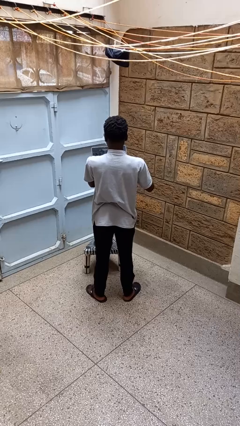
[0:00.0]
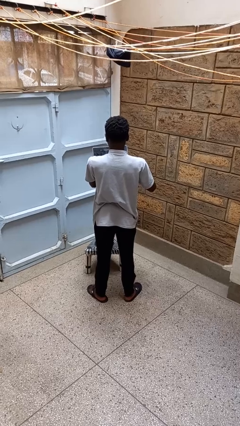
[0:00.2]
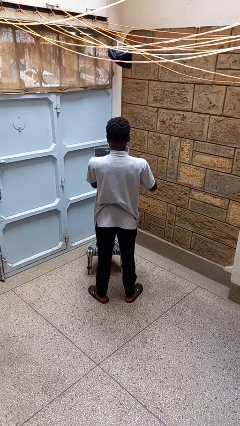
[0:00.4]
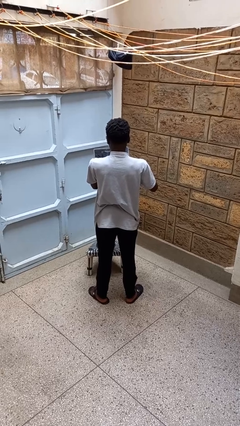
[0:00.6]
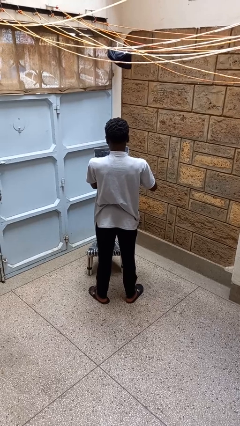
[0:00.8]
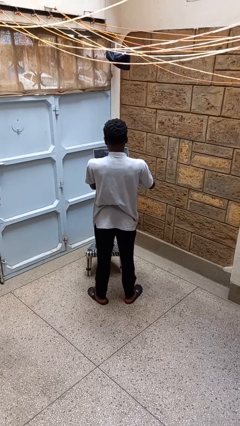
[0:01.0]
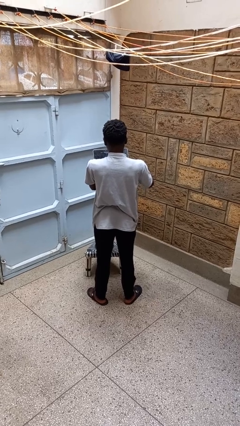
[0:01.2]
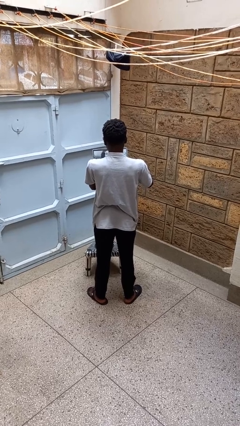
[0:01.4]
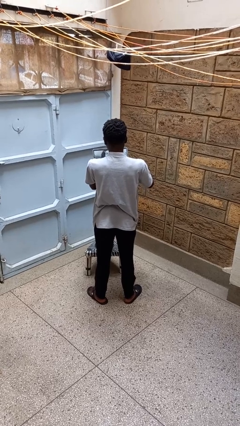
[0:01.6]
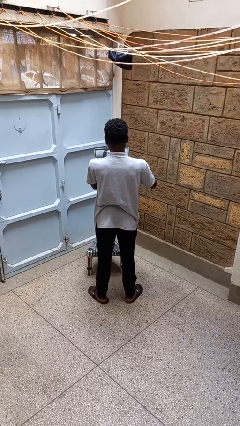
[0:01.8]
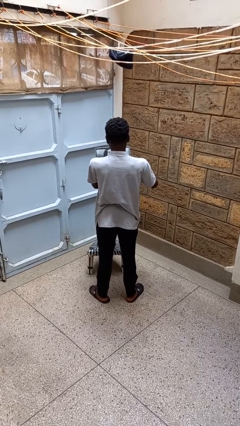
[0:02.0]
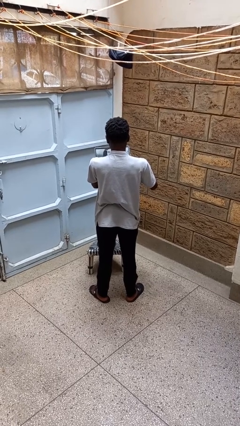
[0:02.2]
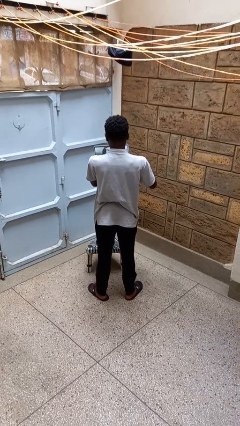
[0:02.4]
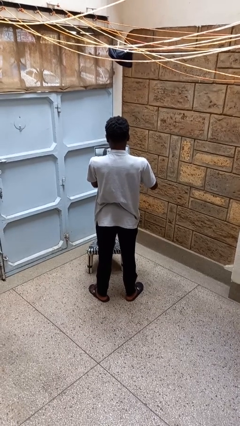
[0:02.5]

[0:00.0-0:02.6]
person interacts with tablet

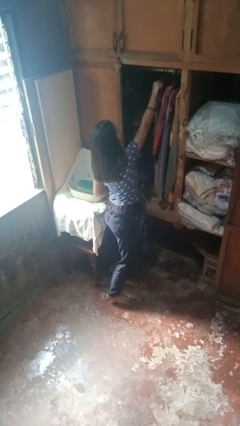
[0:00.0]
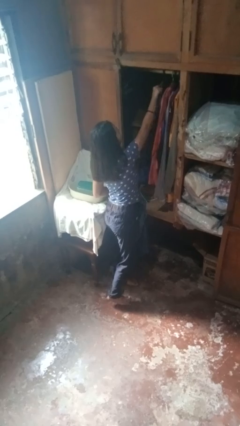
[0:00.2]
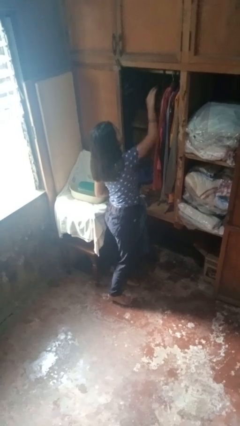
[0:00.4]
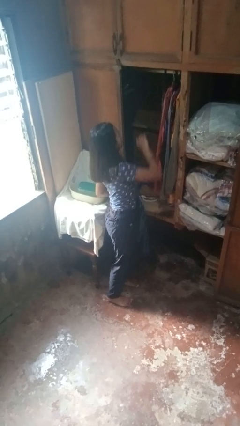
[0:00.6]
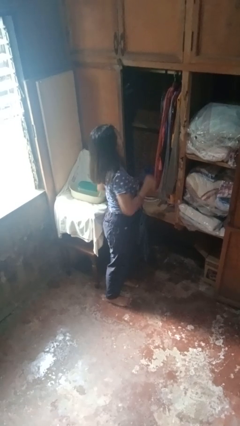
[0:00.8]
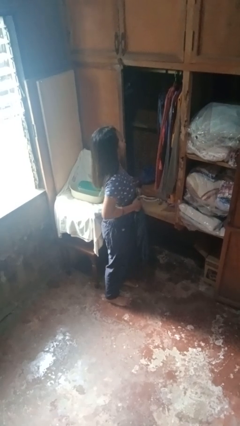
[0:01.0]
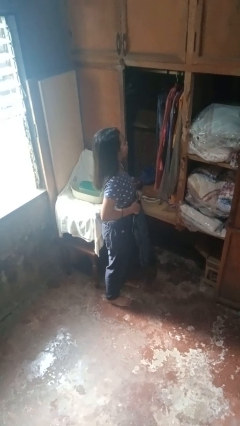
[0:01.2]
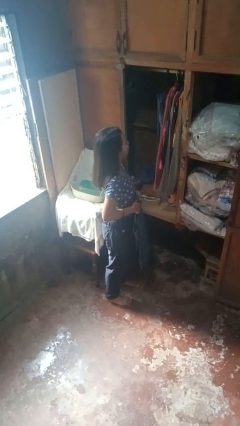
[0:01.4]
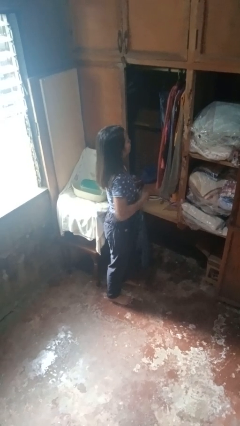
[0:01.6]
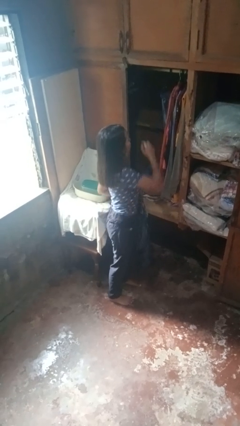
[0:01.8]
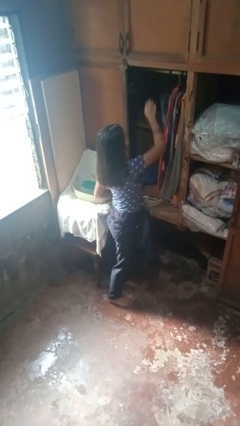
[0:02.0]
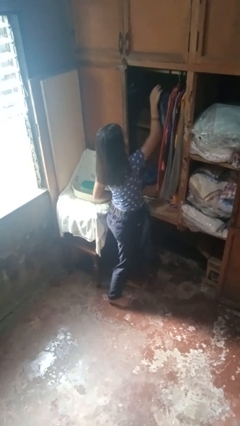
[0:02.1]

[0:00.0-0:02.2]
person puts clothes into closet

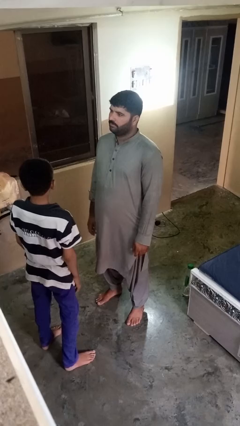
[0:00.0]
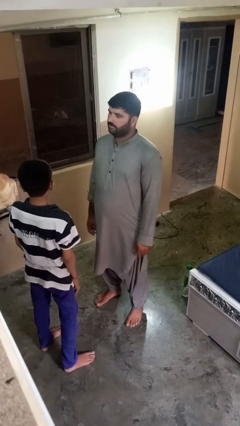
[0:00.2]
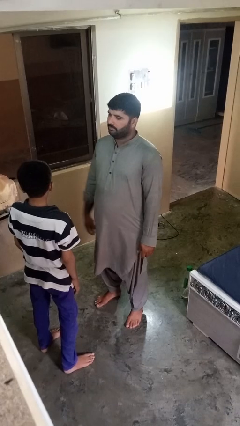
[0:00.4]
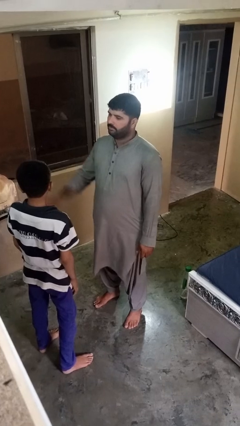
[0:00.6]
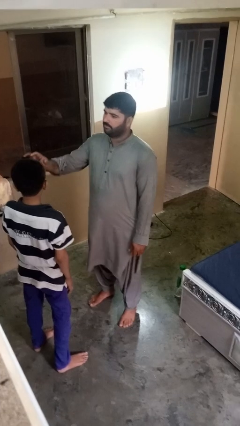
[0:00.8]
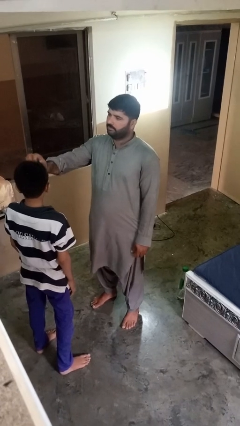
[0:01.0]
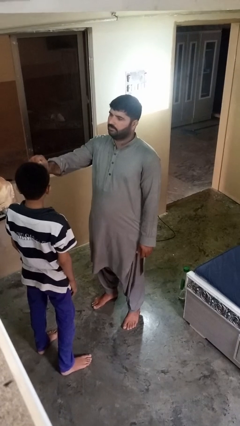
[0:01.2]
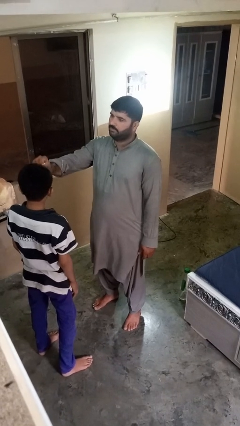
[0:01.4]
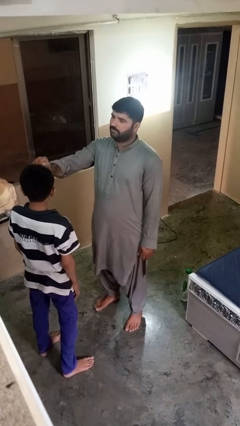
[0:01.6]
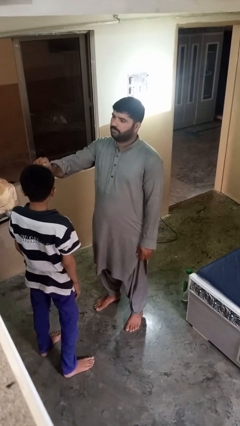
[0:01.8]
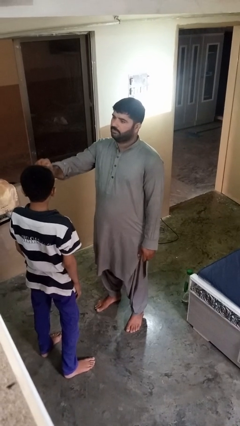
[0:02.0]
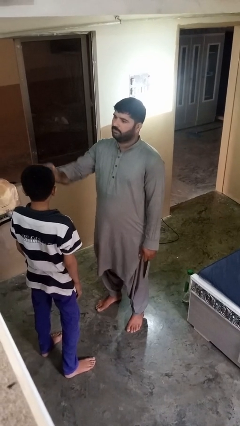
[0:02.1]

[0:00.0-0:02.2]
person braids hair of person

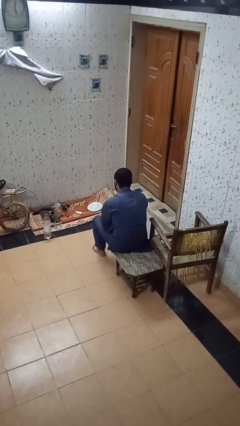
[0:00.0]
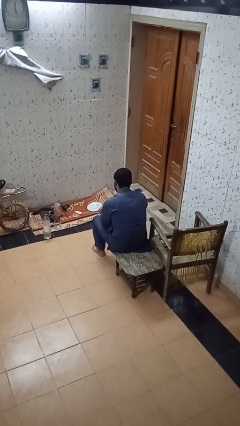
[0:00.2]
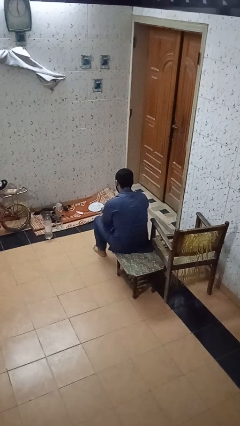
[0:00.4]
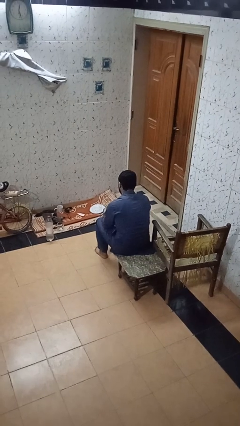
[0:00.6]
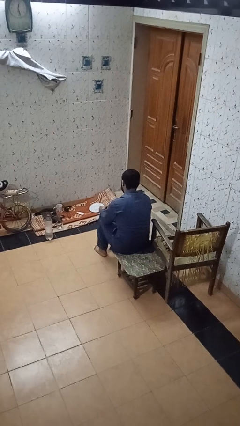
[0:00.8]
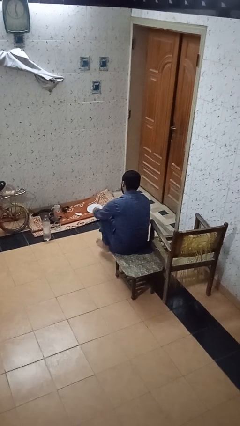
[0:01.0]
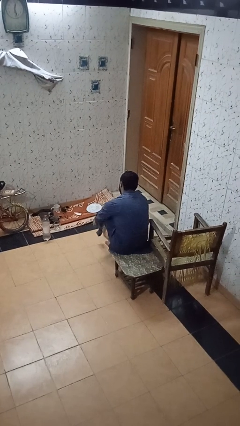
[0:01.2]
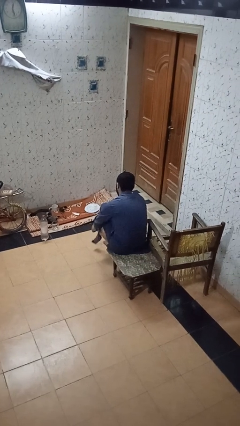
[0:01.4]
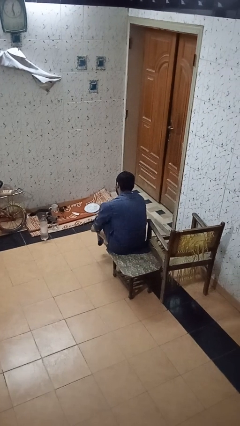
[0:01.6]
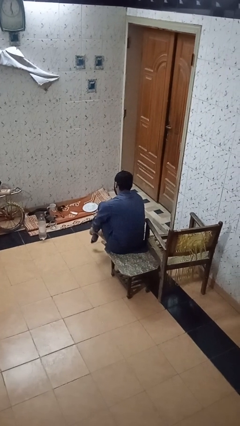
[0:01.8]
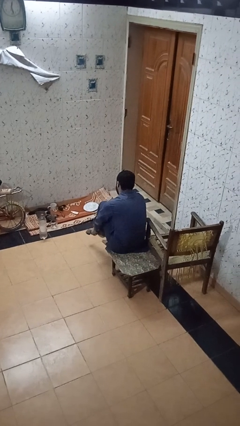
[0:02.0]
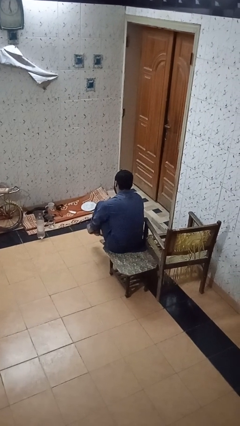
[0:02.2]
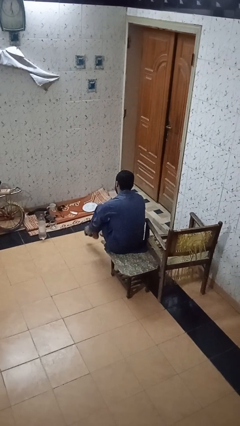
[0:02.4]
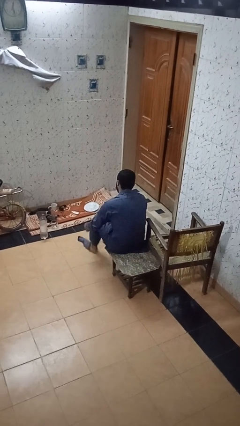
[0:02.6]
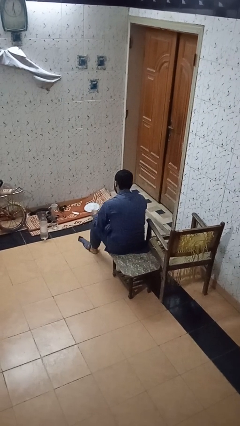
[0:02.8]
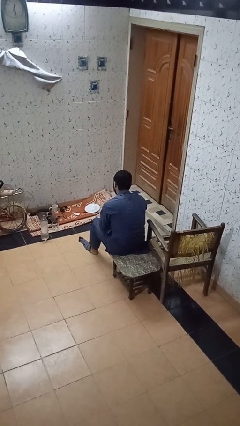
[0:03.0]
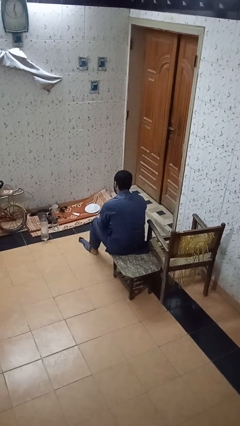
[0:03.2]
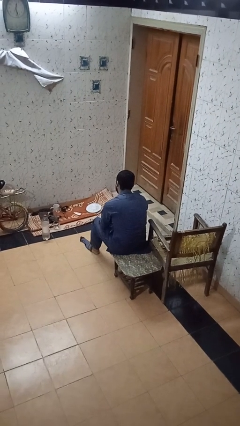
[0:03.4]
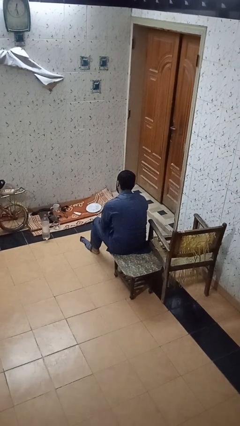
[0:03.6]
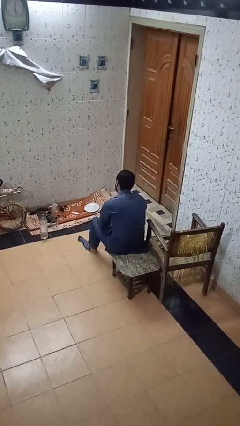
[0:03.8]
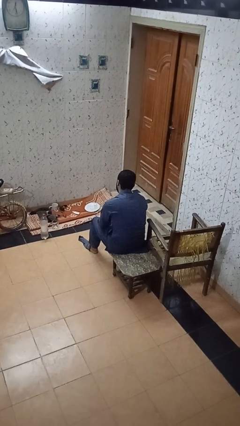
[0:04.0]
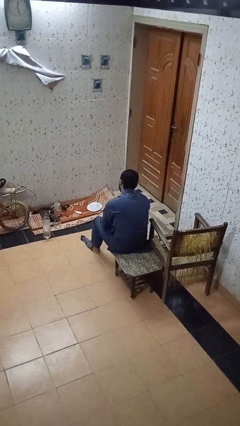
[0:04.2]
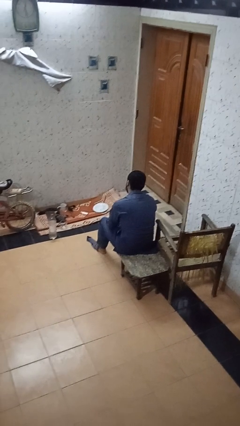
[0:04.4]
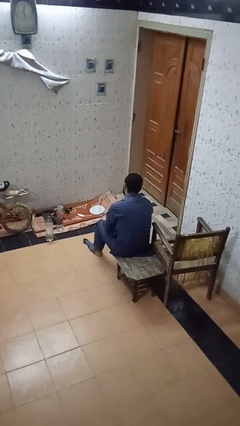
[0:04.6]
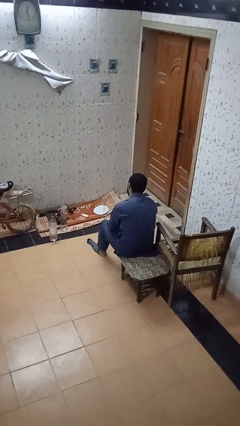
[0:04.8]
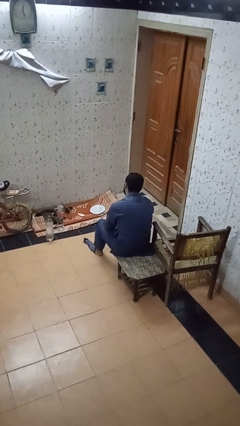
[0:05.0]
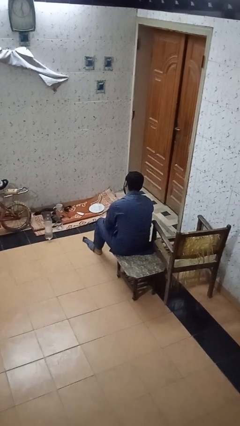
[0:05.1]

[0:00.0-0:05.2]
person puts on socks

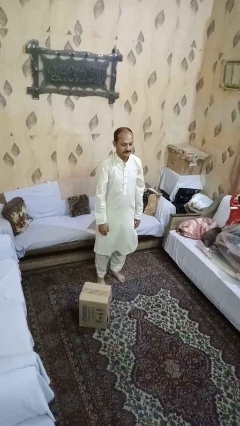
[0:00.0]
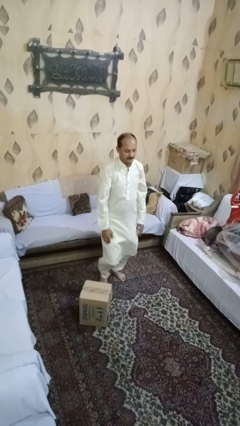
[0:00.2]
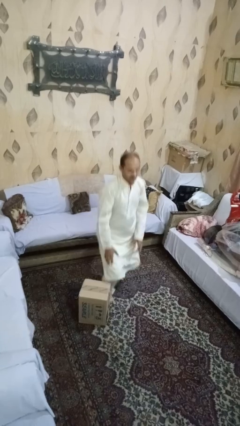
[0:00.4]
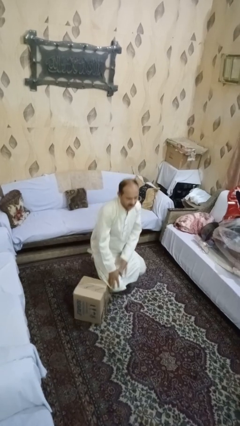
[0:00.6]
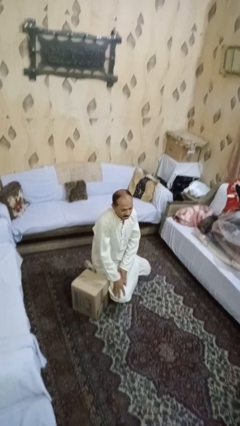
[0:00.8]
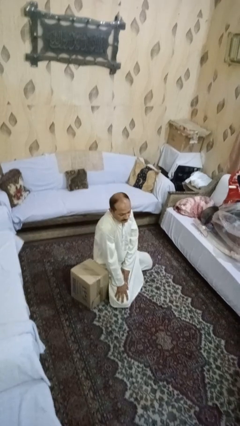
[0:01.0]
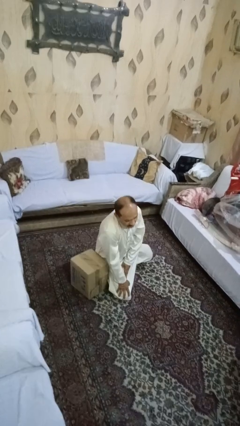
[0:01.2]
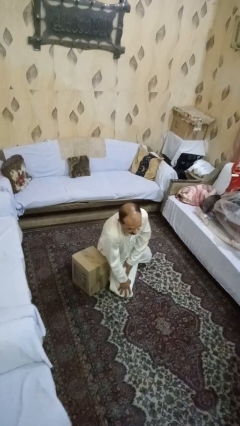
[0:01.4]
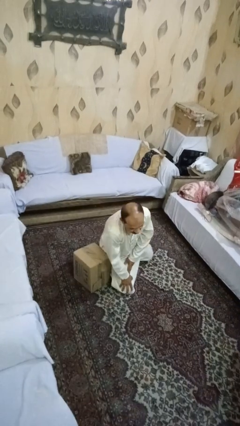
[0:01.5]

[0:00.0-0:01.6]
person trips on object on floor

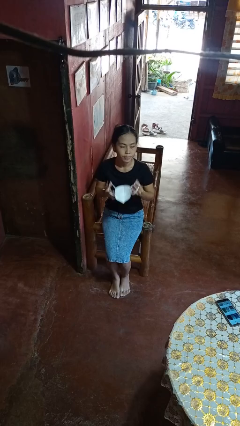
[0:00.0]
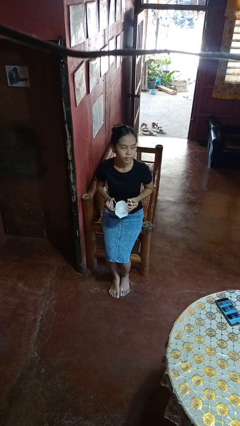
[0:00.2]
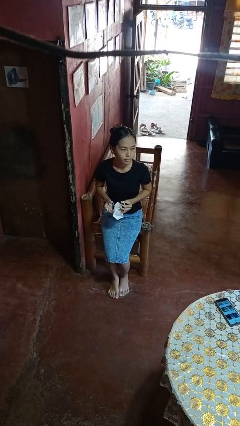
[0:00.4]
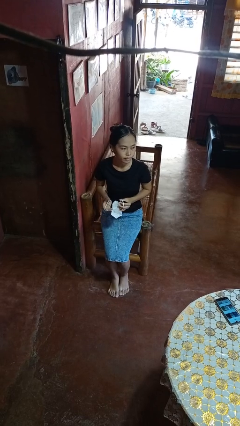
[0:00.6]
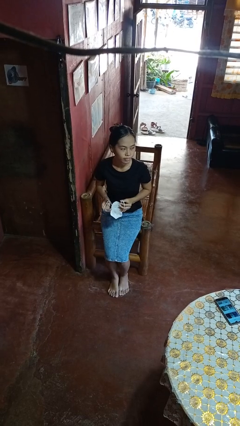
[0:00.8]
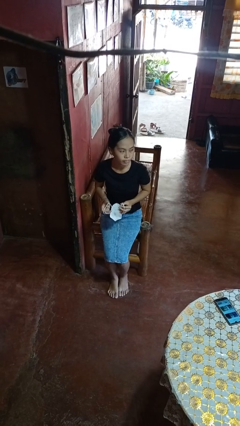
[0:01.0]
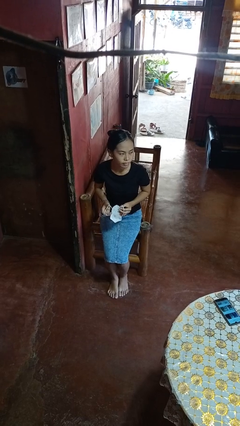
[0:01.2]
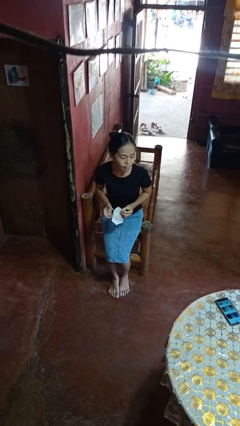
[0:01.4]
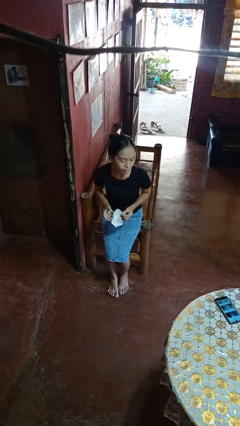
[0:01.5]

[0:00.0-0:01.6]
person takes off facemask

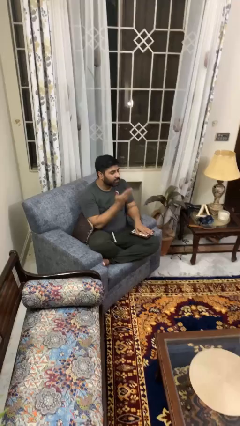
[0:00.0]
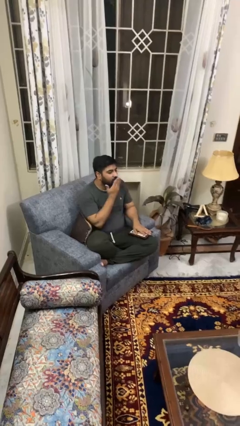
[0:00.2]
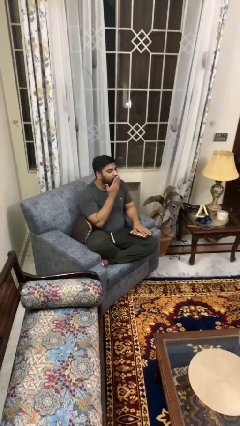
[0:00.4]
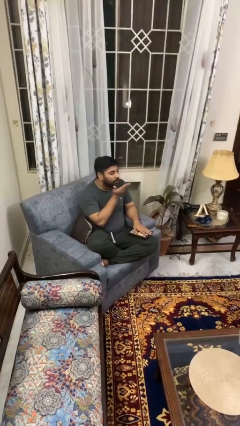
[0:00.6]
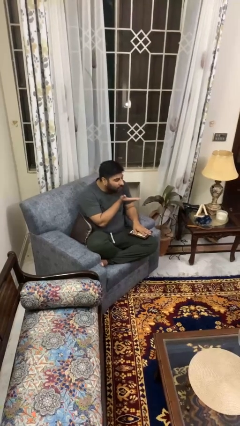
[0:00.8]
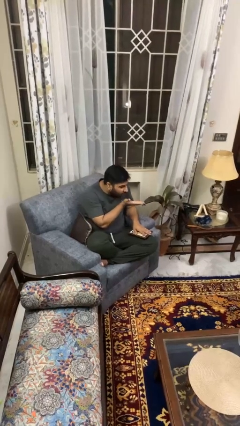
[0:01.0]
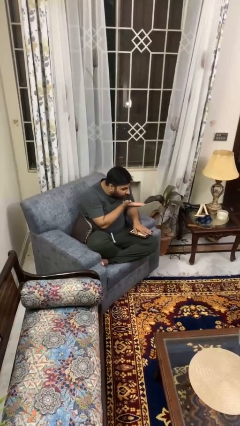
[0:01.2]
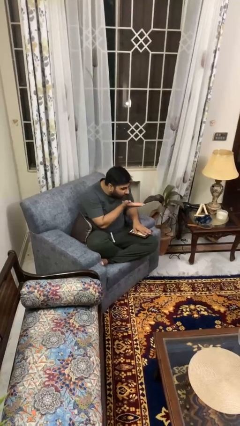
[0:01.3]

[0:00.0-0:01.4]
person gestures blow kiss
